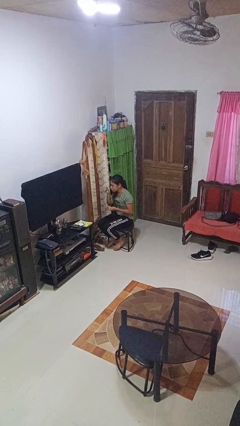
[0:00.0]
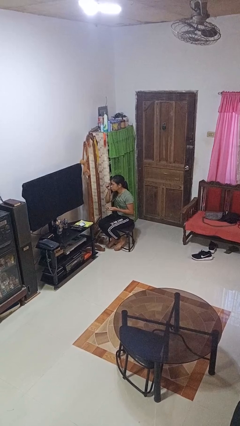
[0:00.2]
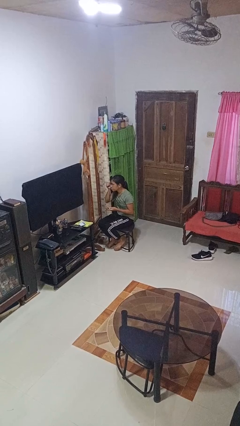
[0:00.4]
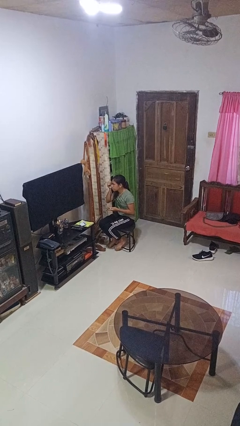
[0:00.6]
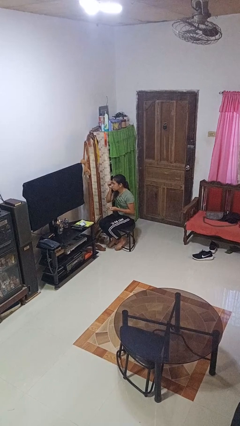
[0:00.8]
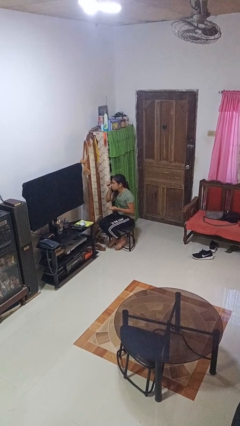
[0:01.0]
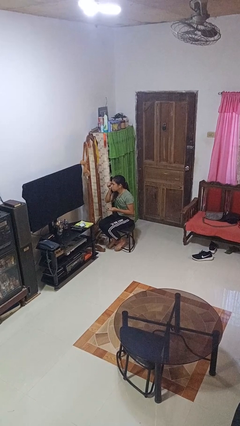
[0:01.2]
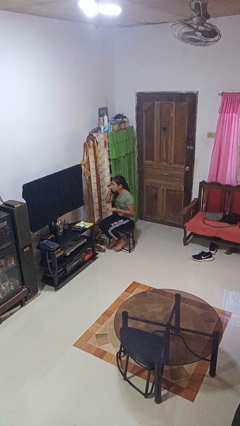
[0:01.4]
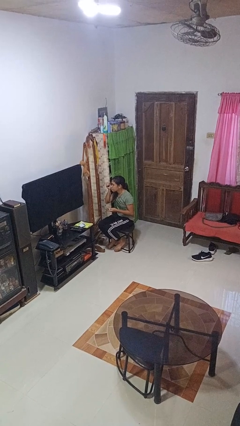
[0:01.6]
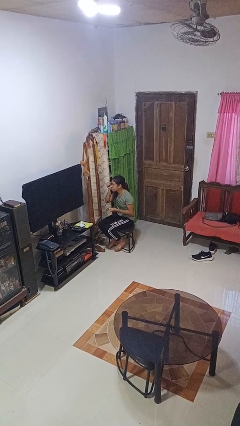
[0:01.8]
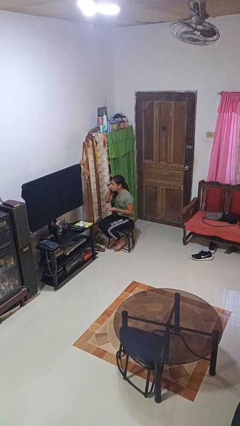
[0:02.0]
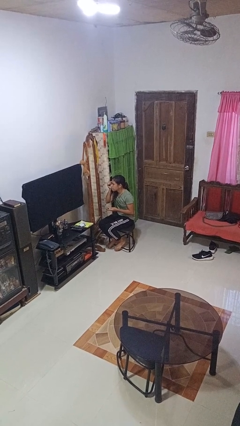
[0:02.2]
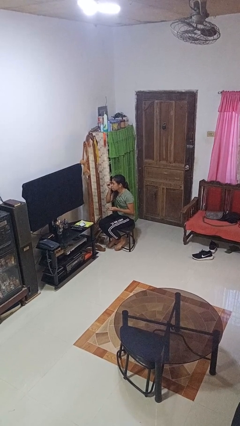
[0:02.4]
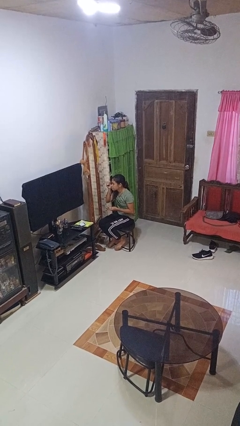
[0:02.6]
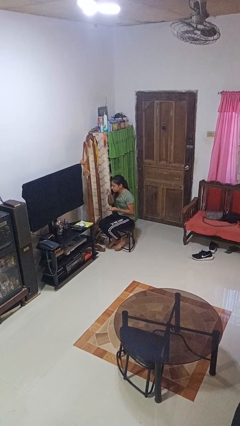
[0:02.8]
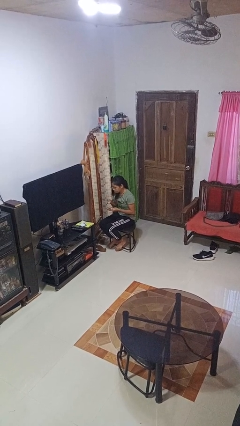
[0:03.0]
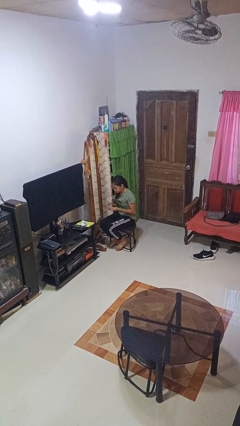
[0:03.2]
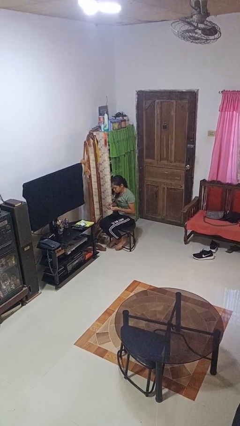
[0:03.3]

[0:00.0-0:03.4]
person applies eye makeup

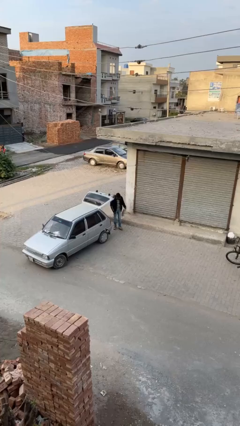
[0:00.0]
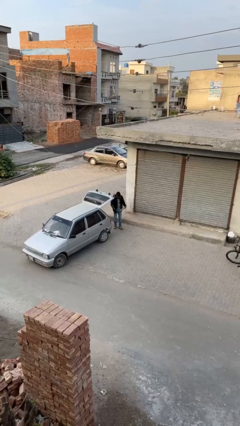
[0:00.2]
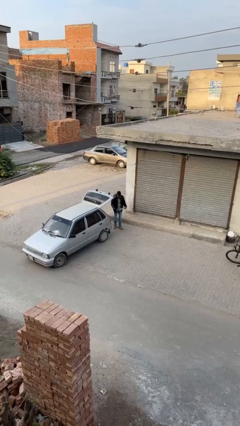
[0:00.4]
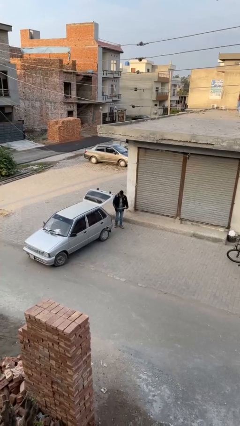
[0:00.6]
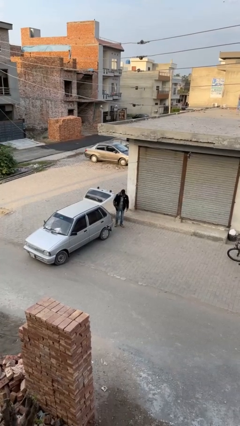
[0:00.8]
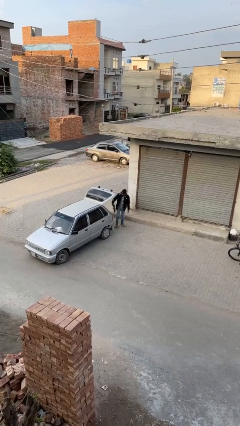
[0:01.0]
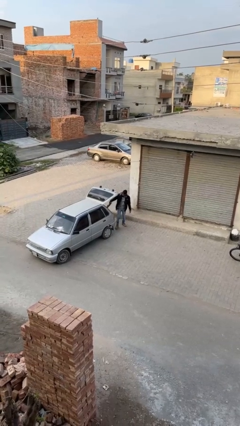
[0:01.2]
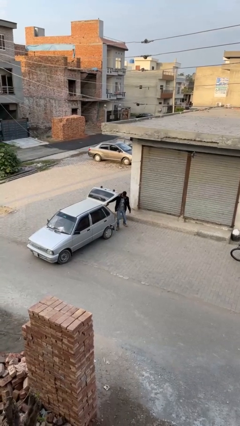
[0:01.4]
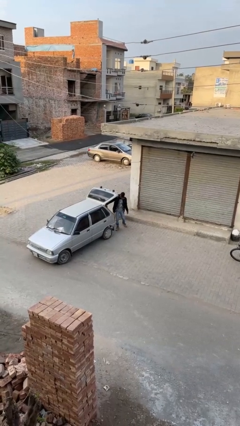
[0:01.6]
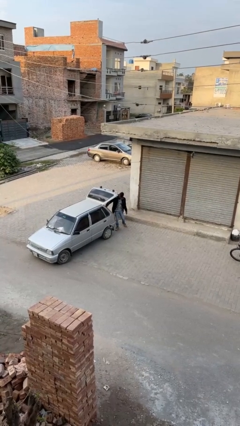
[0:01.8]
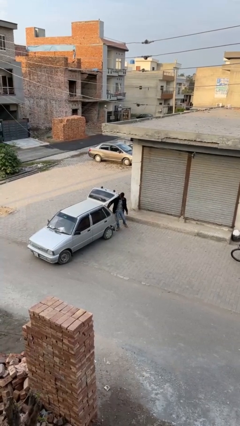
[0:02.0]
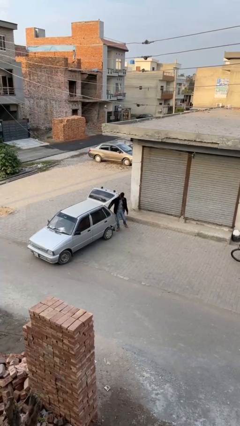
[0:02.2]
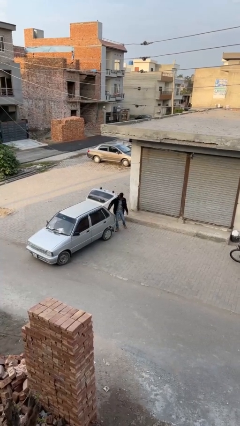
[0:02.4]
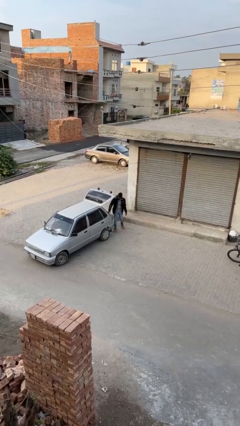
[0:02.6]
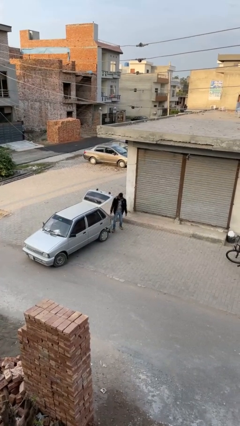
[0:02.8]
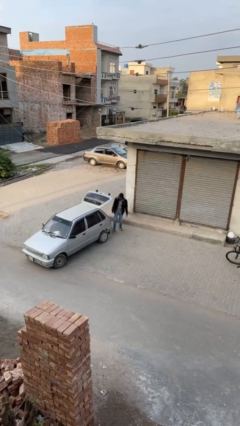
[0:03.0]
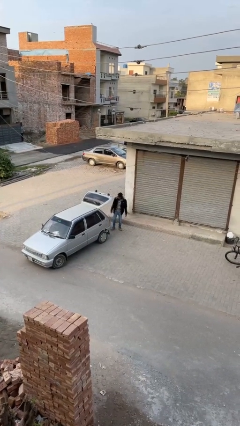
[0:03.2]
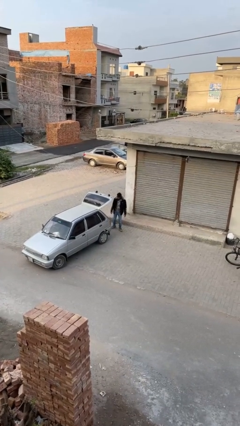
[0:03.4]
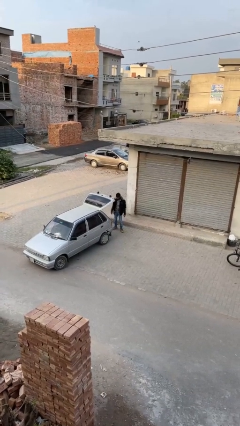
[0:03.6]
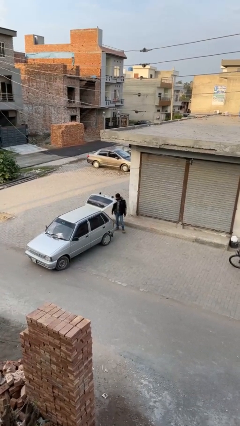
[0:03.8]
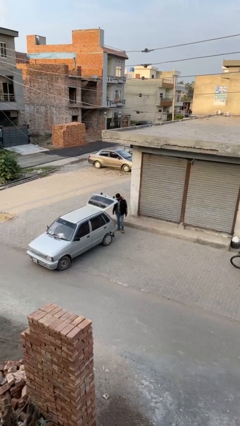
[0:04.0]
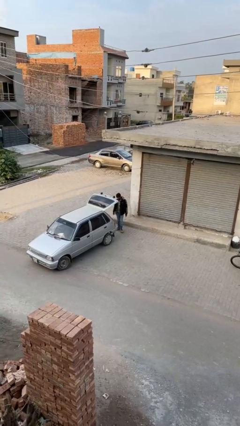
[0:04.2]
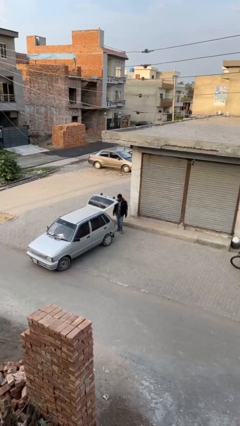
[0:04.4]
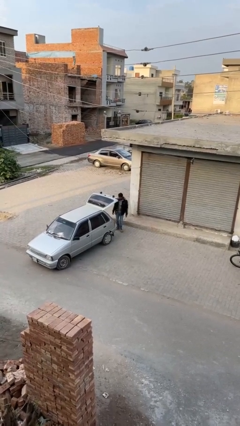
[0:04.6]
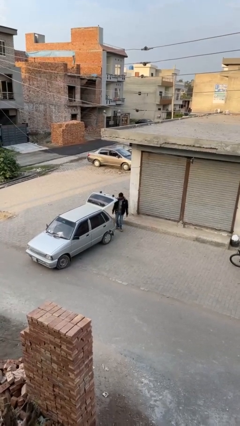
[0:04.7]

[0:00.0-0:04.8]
person loads car

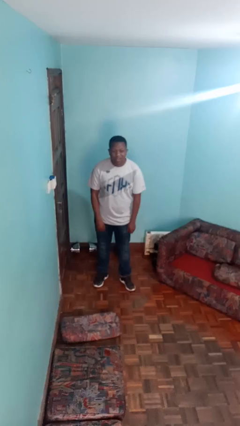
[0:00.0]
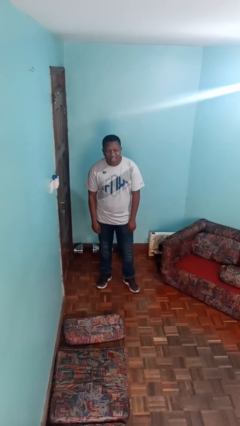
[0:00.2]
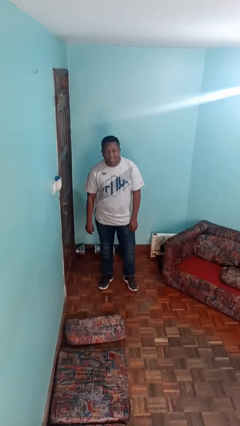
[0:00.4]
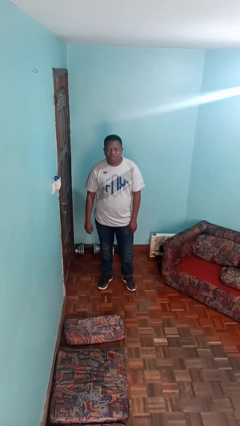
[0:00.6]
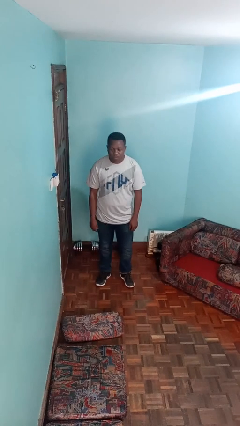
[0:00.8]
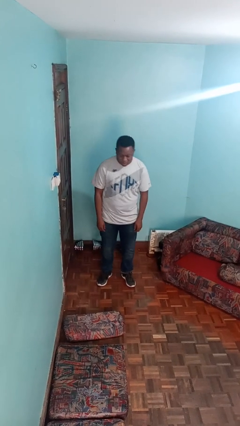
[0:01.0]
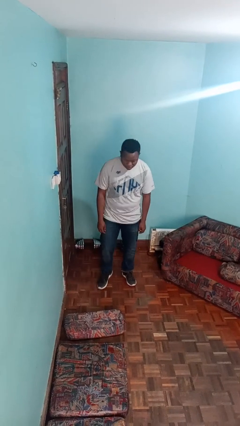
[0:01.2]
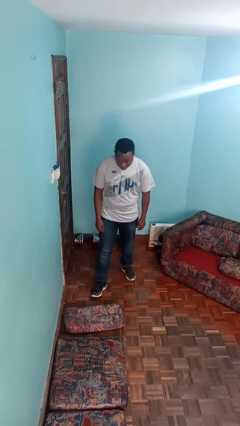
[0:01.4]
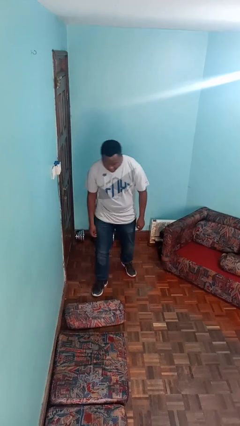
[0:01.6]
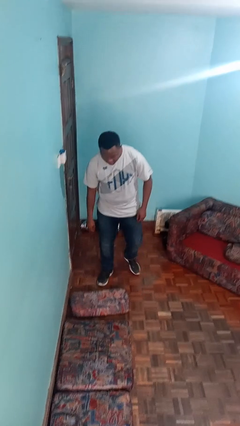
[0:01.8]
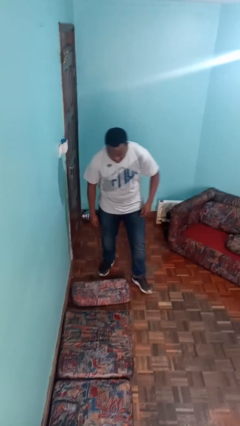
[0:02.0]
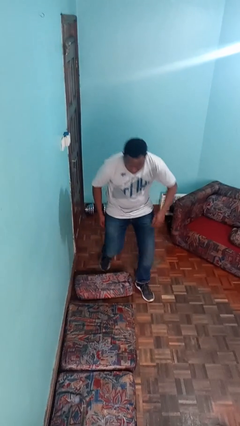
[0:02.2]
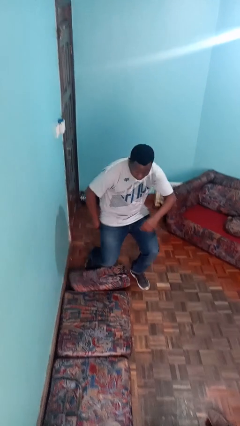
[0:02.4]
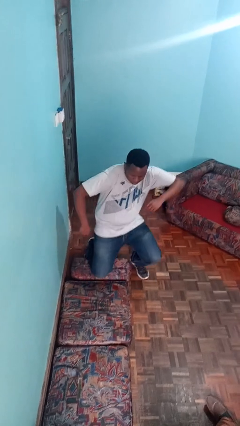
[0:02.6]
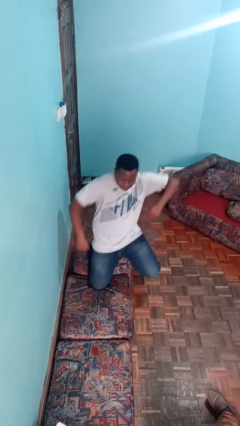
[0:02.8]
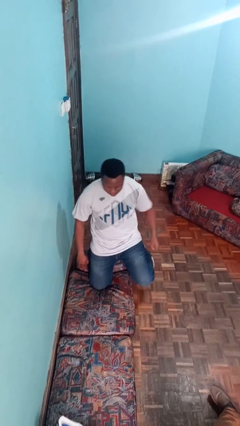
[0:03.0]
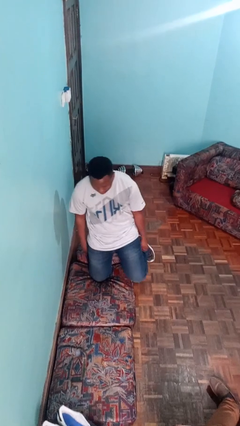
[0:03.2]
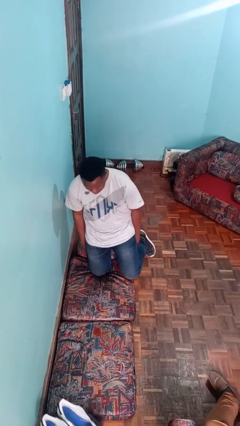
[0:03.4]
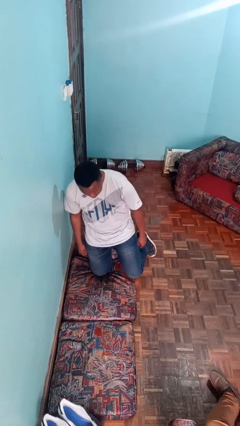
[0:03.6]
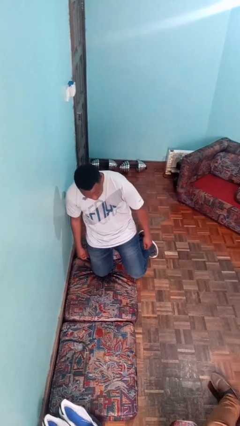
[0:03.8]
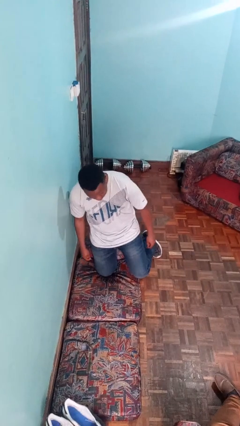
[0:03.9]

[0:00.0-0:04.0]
person trips on object on floor

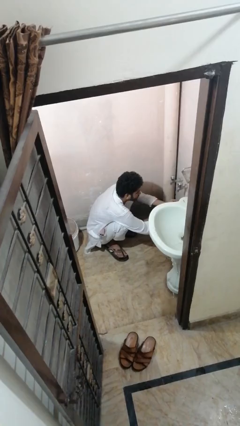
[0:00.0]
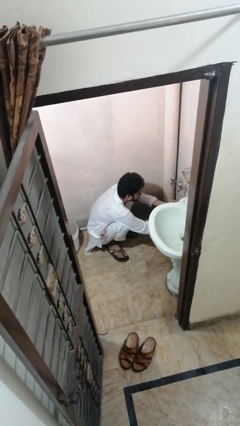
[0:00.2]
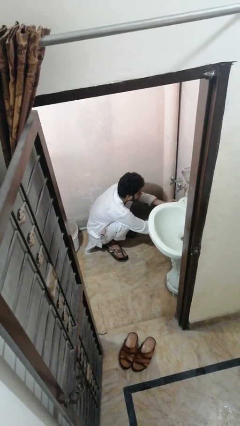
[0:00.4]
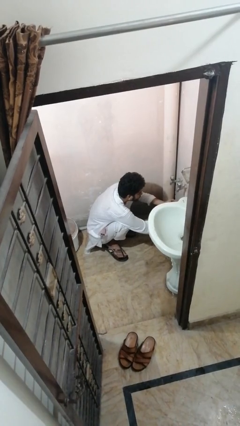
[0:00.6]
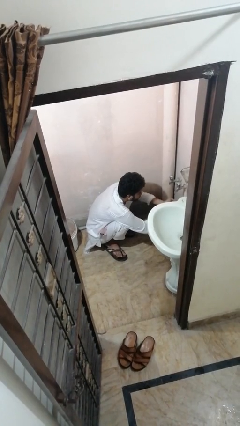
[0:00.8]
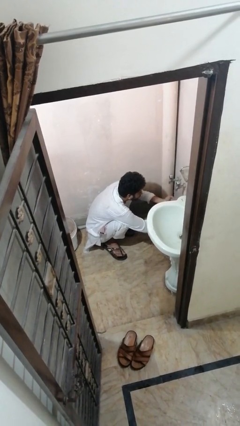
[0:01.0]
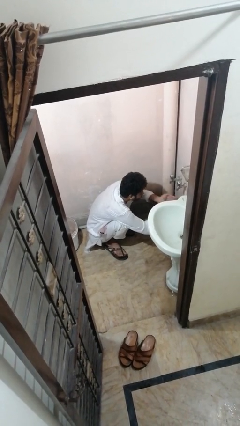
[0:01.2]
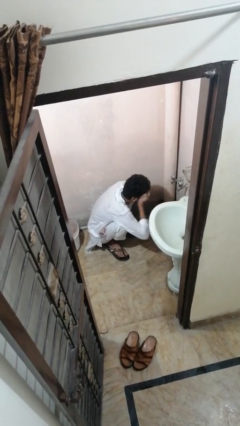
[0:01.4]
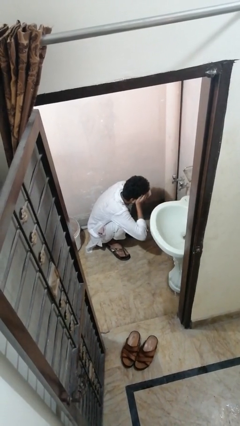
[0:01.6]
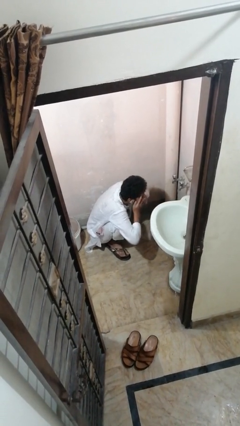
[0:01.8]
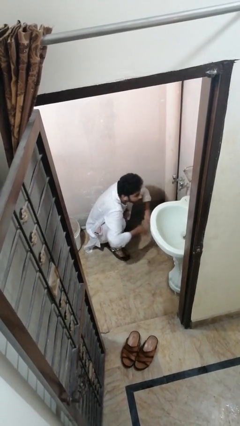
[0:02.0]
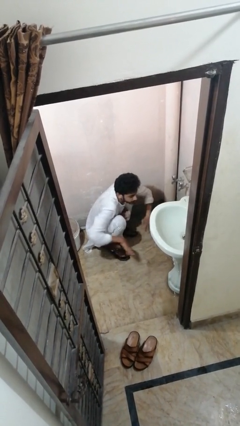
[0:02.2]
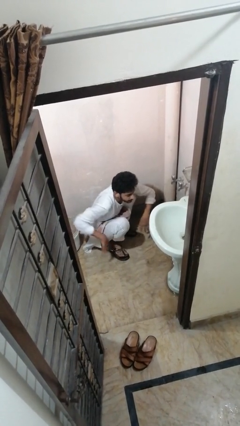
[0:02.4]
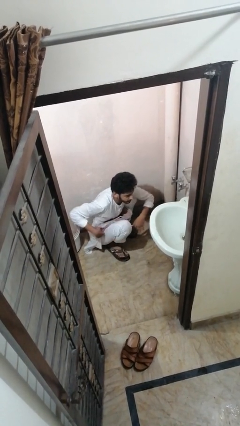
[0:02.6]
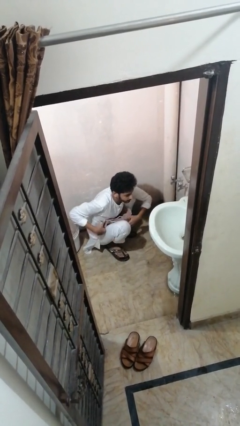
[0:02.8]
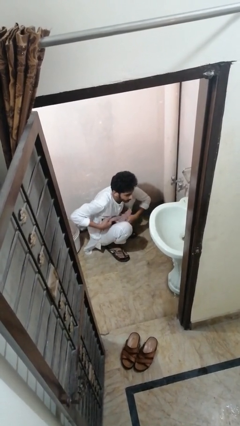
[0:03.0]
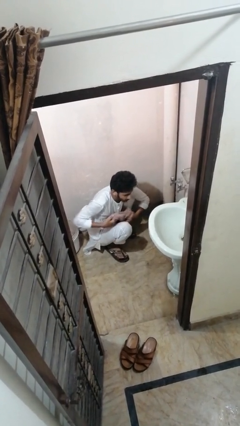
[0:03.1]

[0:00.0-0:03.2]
person washes face

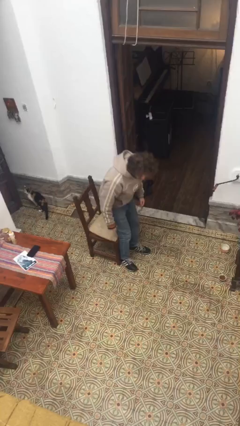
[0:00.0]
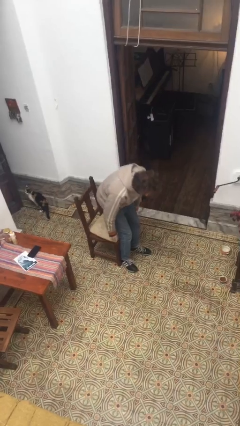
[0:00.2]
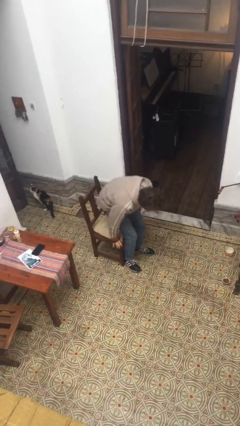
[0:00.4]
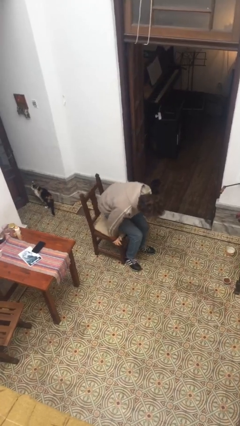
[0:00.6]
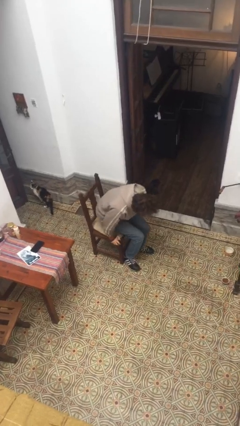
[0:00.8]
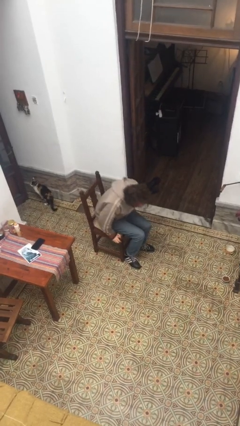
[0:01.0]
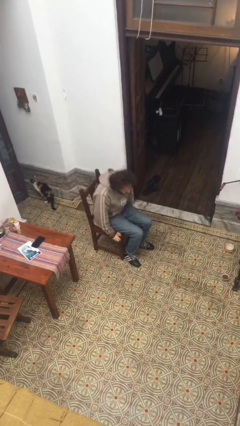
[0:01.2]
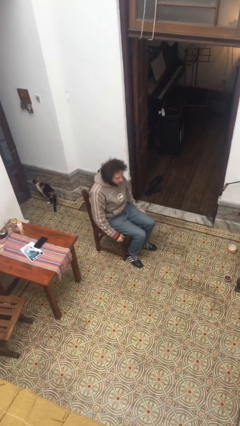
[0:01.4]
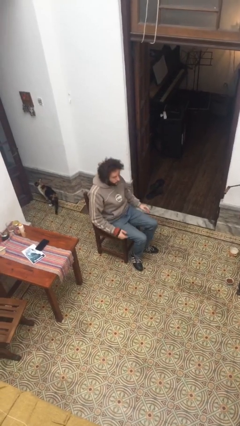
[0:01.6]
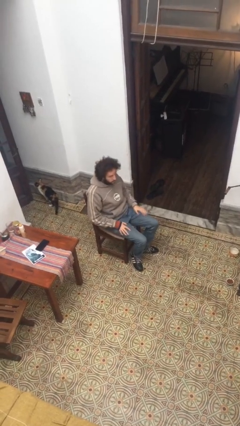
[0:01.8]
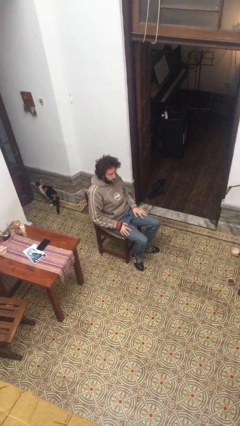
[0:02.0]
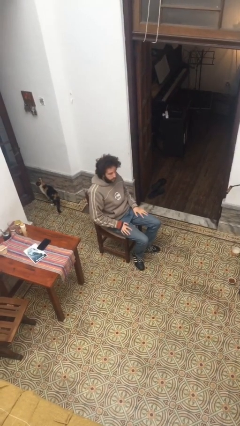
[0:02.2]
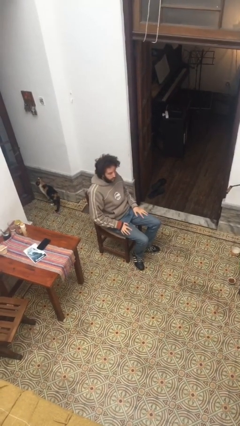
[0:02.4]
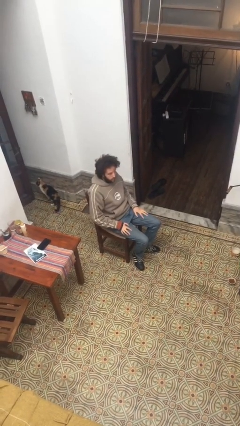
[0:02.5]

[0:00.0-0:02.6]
person sits down
